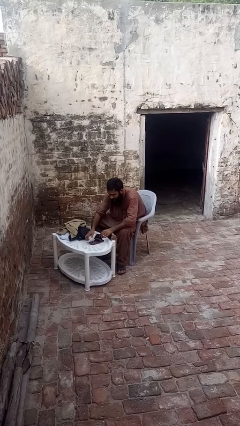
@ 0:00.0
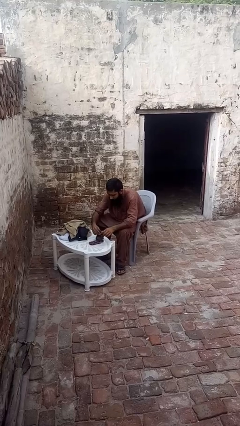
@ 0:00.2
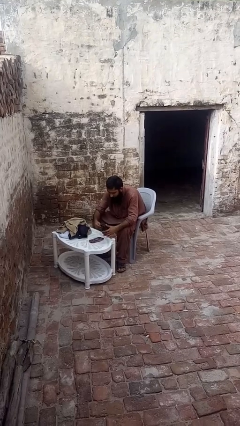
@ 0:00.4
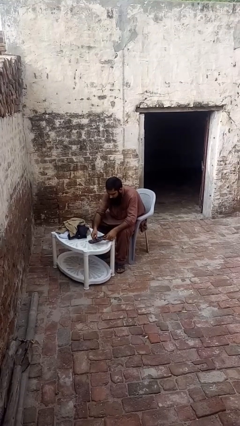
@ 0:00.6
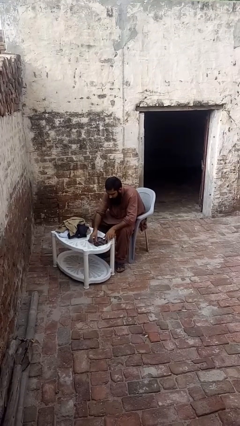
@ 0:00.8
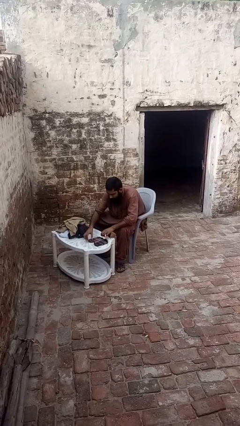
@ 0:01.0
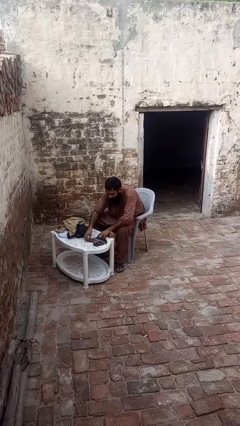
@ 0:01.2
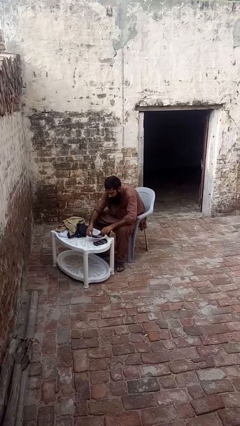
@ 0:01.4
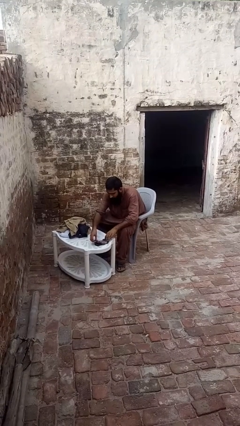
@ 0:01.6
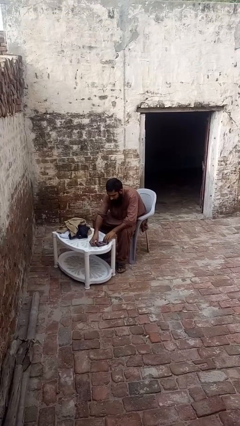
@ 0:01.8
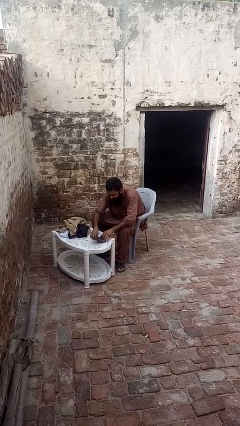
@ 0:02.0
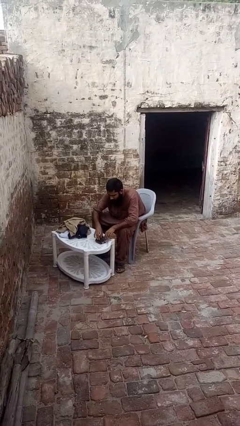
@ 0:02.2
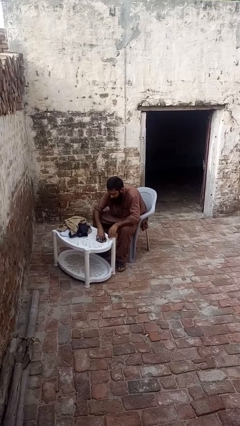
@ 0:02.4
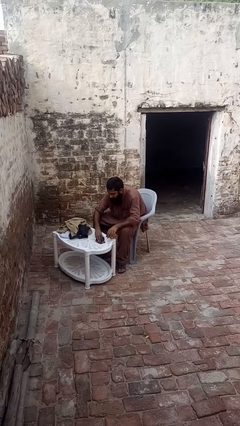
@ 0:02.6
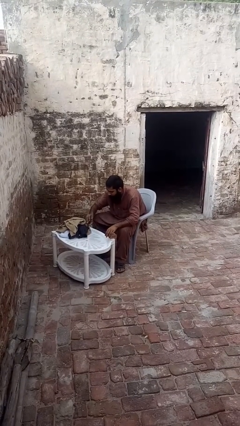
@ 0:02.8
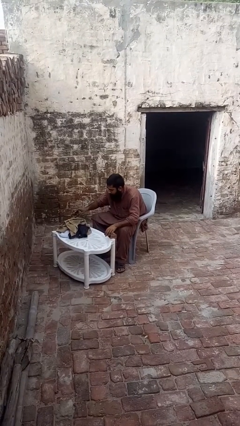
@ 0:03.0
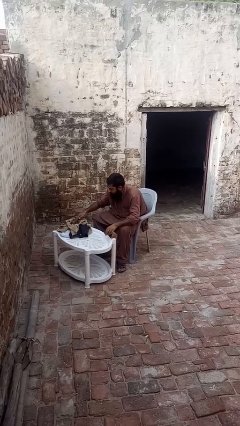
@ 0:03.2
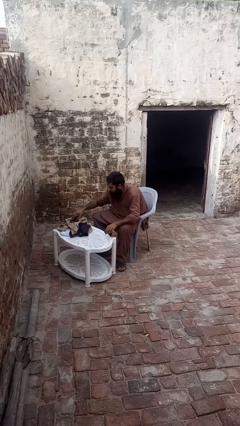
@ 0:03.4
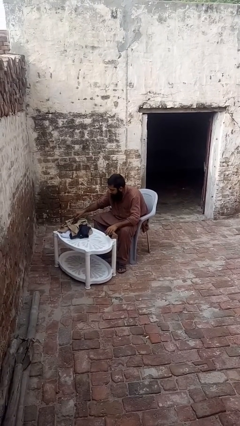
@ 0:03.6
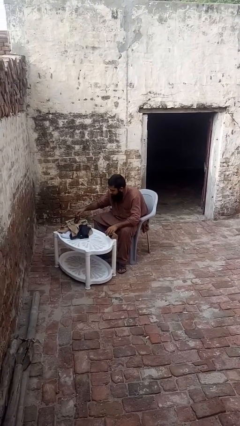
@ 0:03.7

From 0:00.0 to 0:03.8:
person folds socks

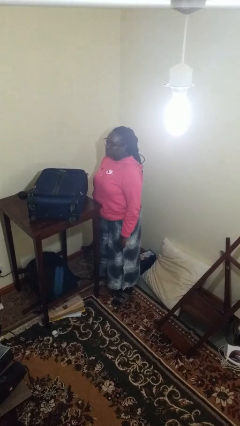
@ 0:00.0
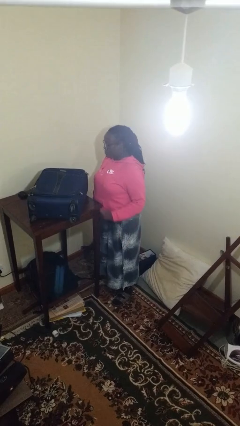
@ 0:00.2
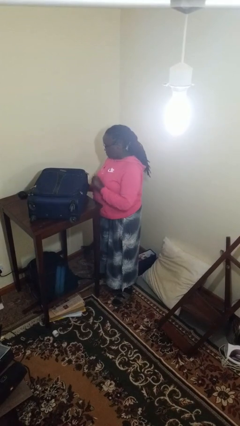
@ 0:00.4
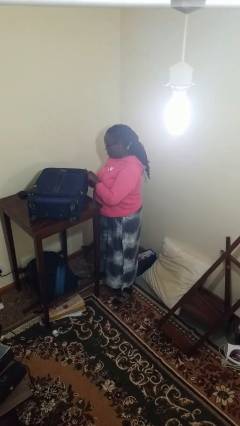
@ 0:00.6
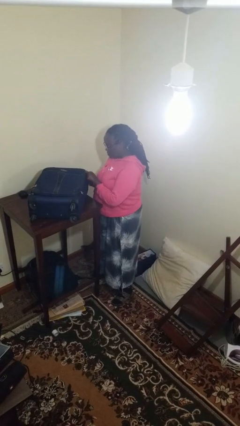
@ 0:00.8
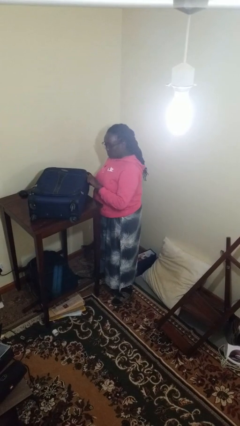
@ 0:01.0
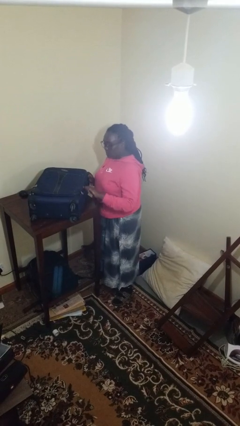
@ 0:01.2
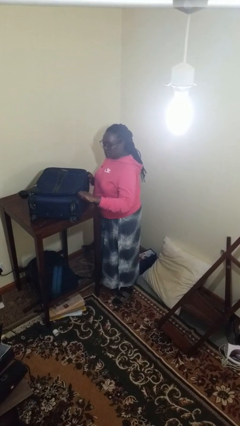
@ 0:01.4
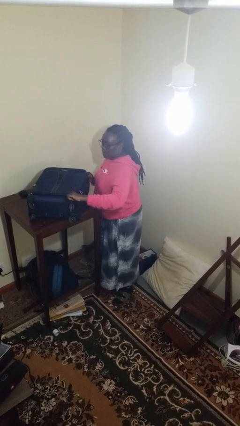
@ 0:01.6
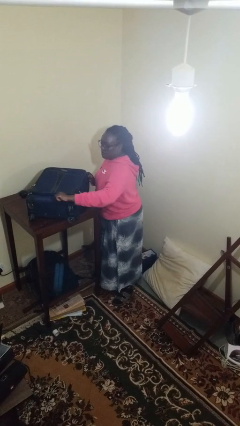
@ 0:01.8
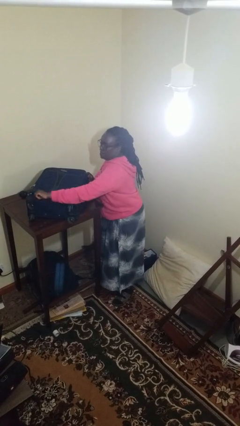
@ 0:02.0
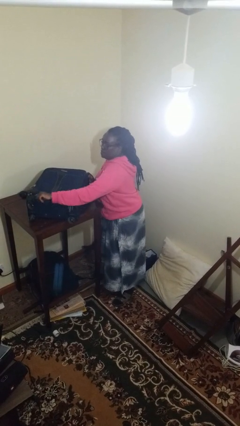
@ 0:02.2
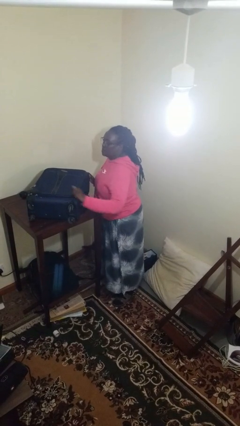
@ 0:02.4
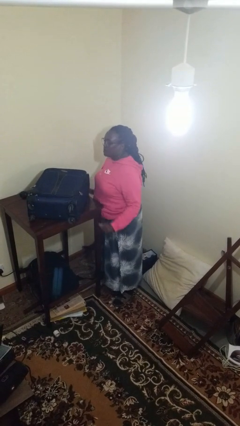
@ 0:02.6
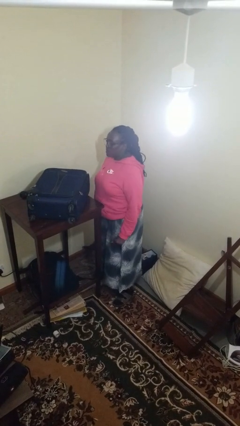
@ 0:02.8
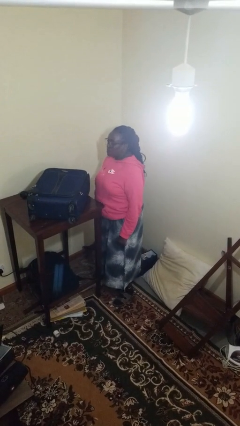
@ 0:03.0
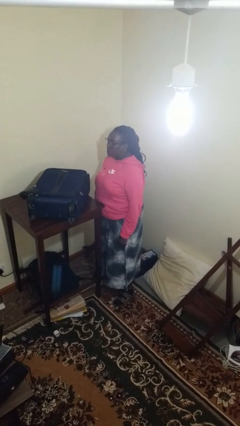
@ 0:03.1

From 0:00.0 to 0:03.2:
person closes suitcase

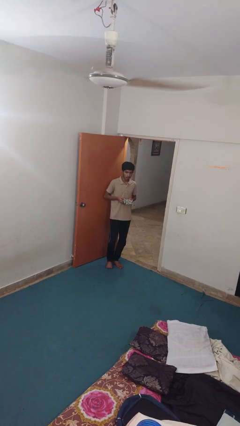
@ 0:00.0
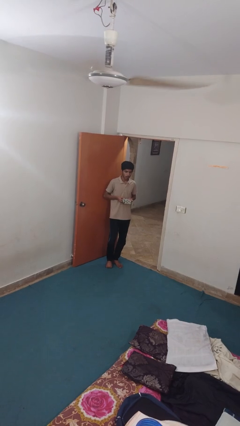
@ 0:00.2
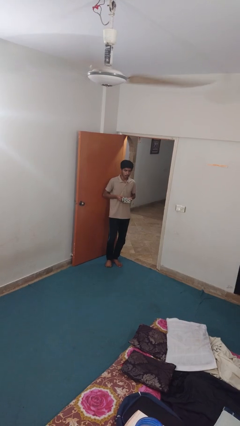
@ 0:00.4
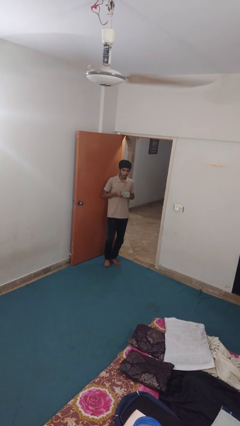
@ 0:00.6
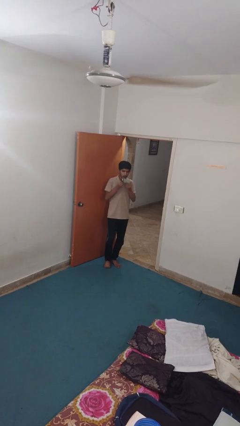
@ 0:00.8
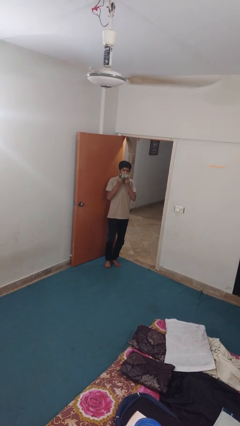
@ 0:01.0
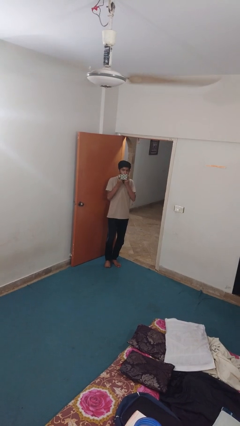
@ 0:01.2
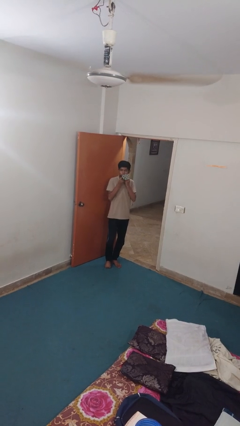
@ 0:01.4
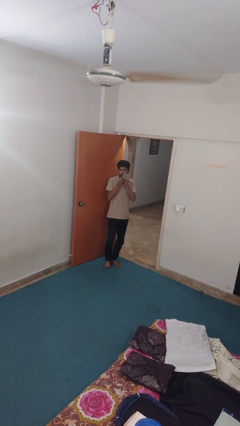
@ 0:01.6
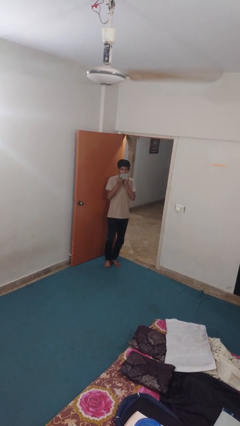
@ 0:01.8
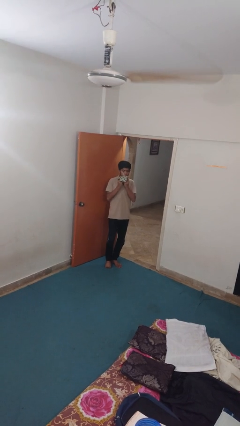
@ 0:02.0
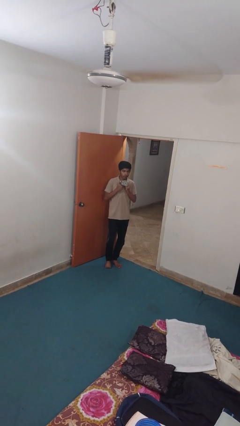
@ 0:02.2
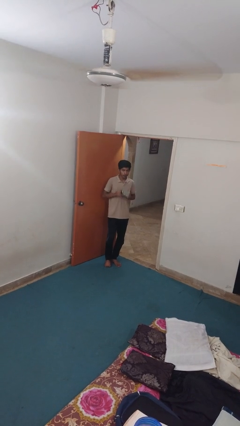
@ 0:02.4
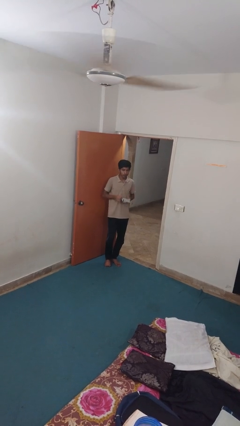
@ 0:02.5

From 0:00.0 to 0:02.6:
person wipes mouth with napkin

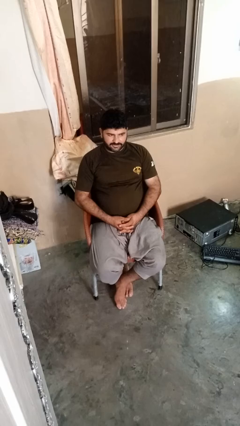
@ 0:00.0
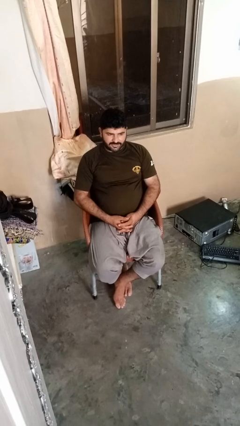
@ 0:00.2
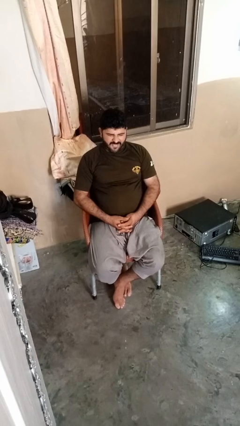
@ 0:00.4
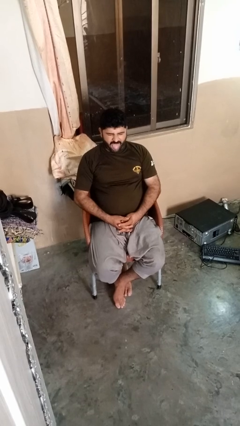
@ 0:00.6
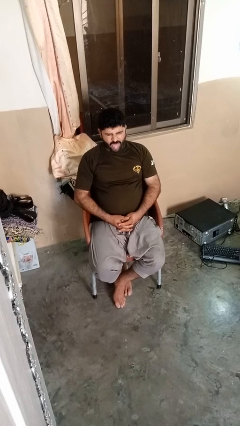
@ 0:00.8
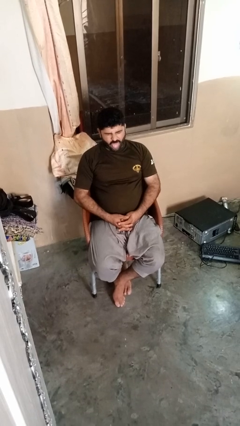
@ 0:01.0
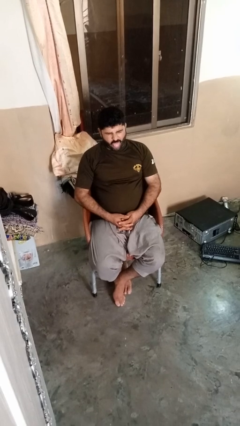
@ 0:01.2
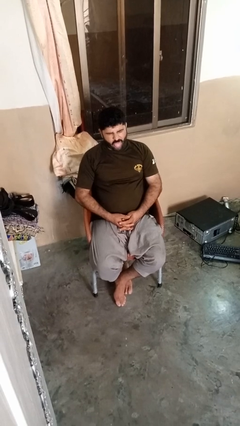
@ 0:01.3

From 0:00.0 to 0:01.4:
person sticks out tongue

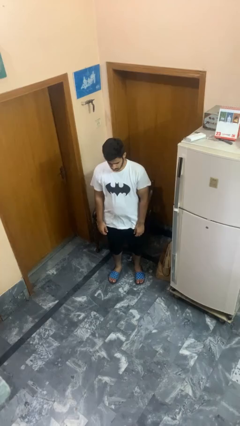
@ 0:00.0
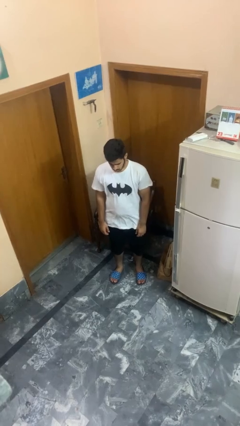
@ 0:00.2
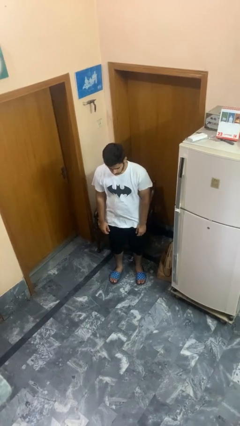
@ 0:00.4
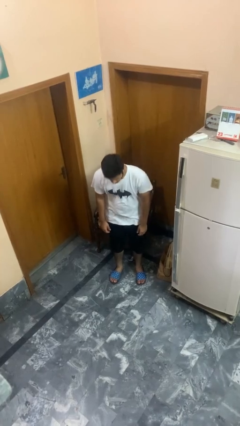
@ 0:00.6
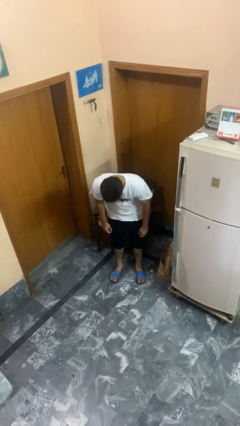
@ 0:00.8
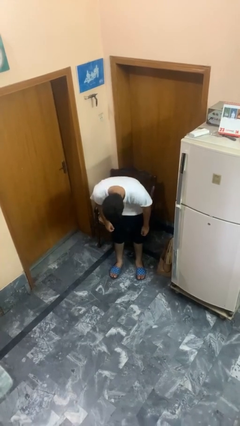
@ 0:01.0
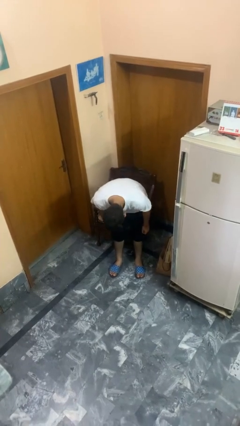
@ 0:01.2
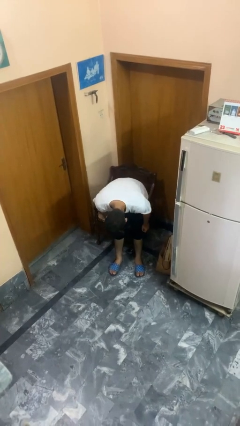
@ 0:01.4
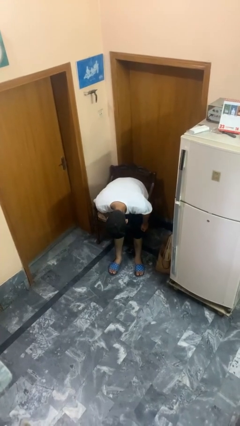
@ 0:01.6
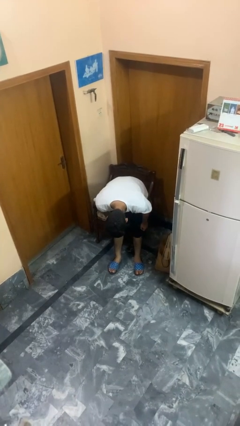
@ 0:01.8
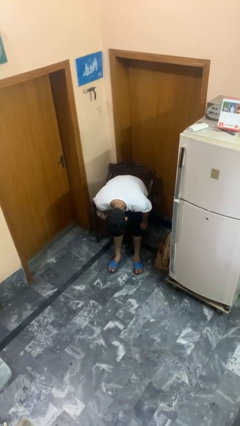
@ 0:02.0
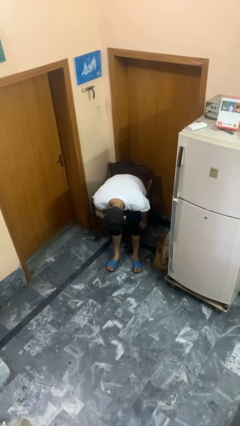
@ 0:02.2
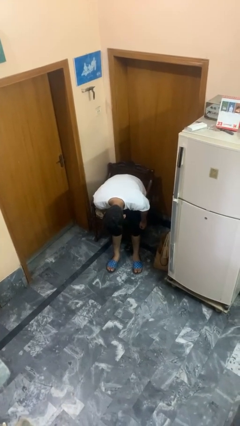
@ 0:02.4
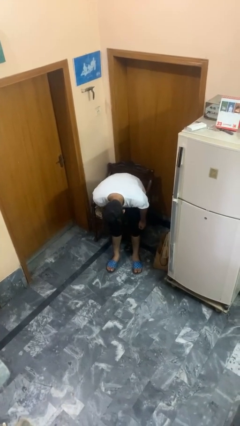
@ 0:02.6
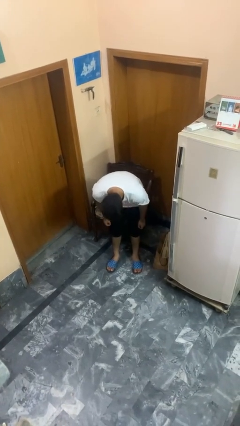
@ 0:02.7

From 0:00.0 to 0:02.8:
person bows

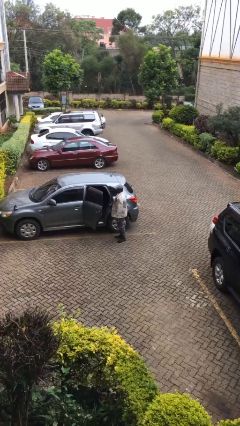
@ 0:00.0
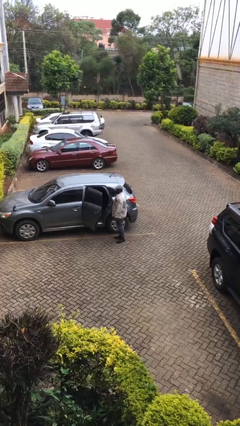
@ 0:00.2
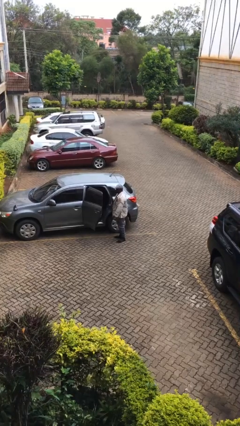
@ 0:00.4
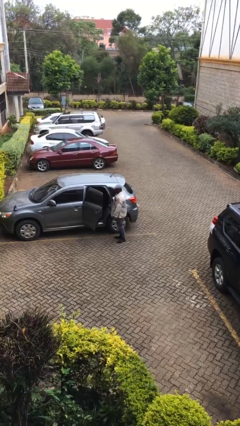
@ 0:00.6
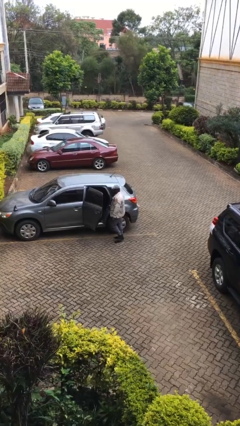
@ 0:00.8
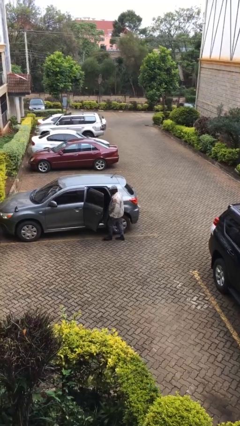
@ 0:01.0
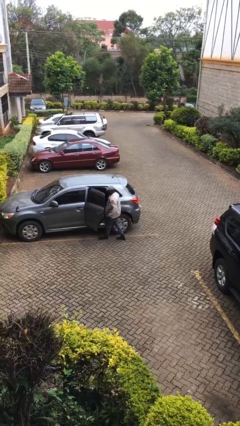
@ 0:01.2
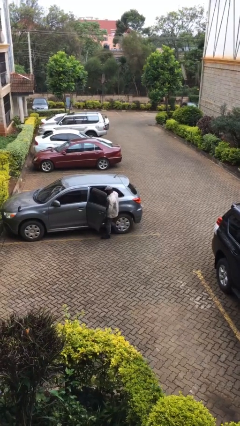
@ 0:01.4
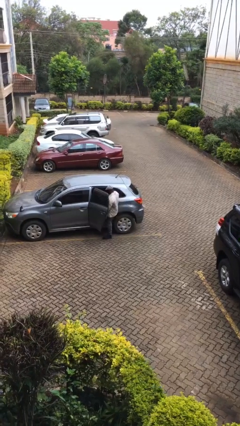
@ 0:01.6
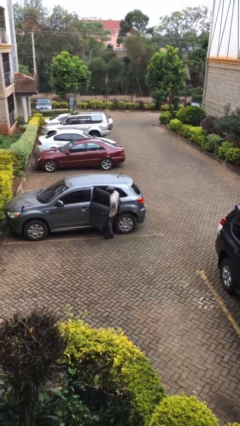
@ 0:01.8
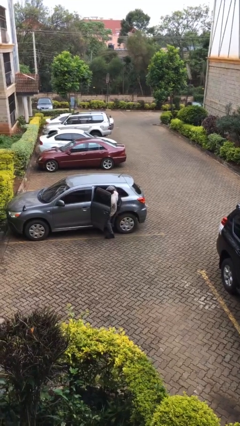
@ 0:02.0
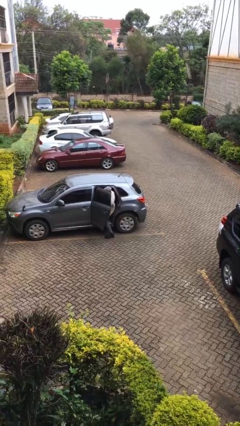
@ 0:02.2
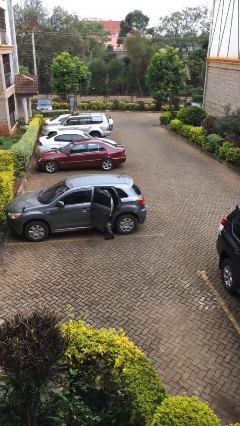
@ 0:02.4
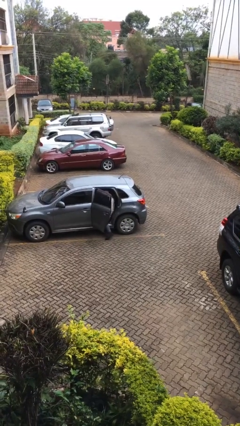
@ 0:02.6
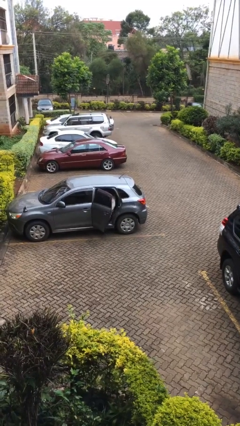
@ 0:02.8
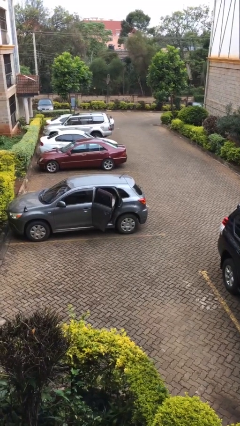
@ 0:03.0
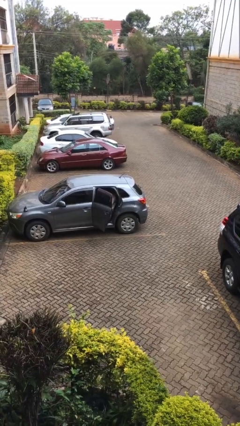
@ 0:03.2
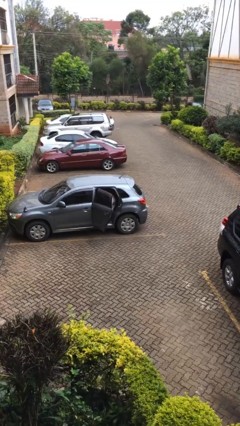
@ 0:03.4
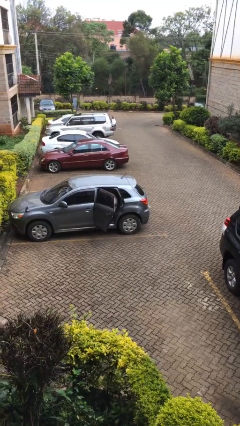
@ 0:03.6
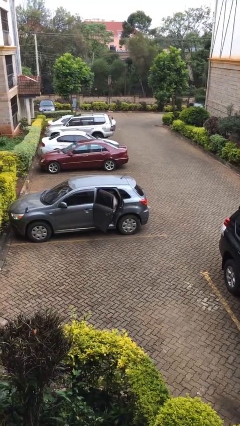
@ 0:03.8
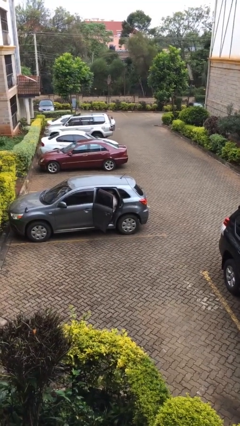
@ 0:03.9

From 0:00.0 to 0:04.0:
person enters car
